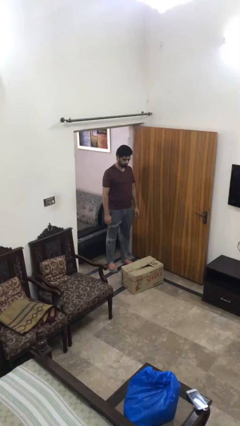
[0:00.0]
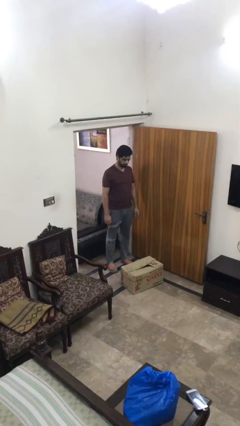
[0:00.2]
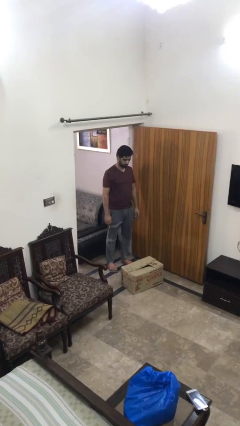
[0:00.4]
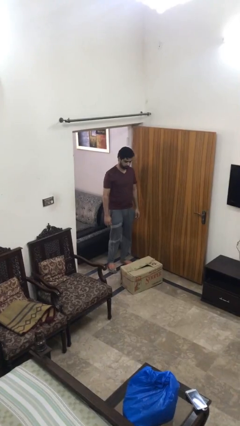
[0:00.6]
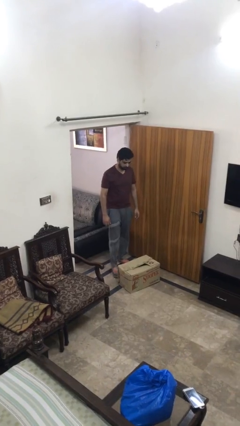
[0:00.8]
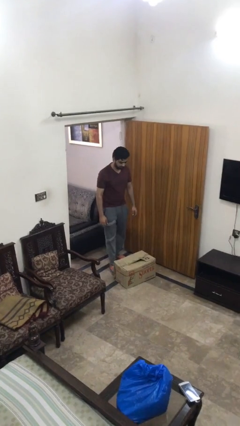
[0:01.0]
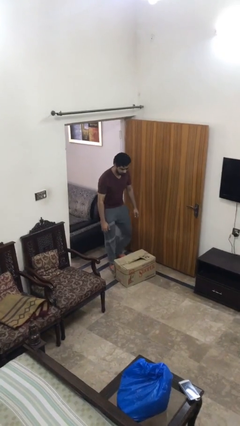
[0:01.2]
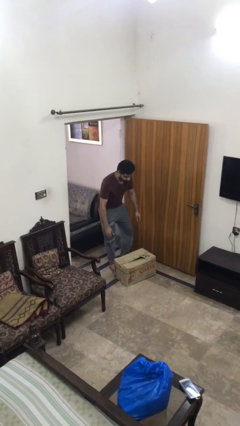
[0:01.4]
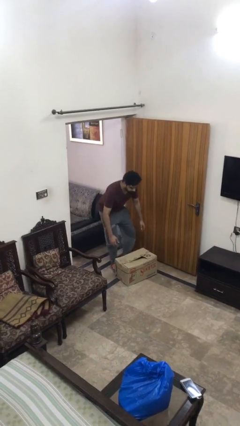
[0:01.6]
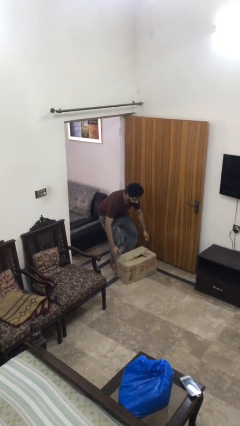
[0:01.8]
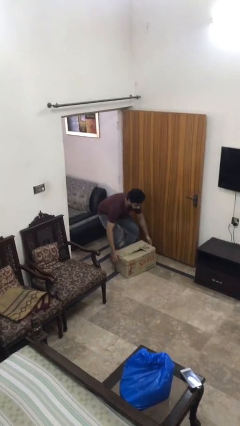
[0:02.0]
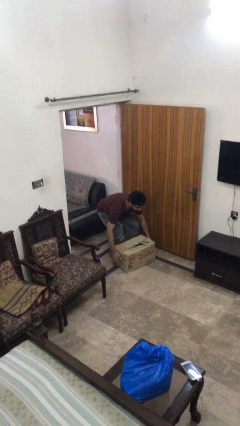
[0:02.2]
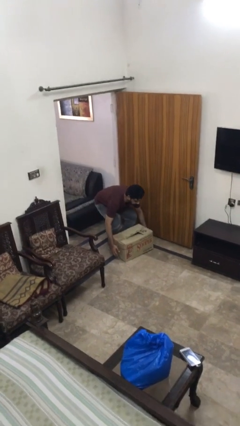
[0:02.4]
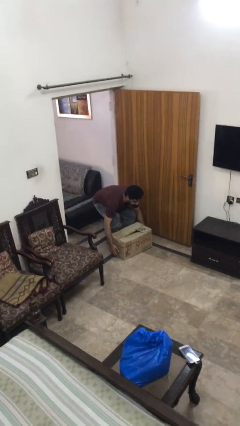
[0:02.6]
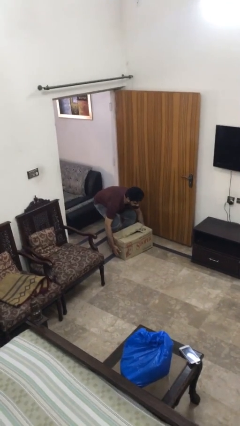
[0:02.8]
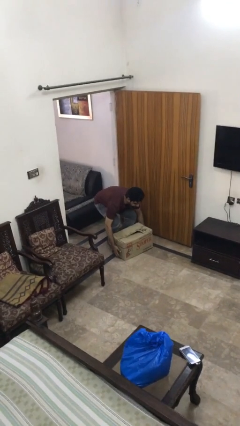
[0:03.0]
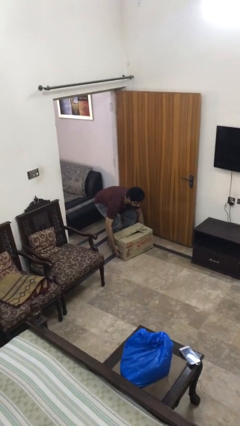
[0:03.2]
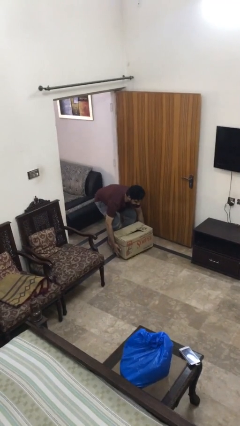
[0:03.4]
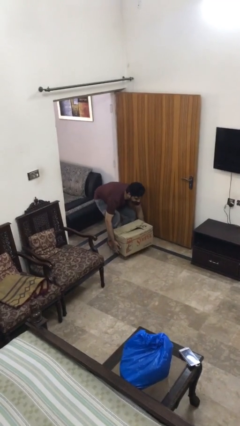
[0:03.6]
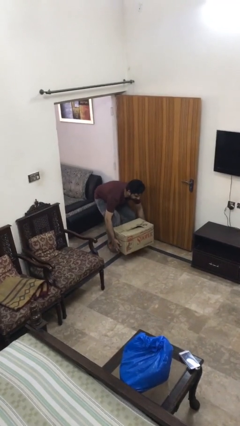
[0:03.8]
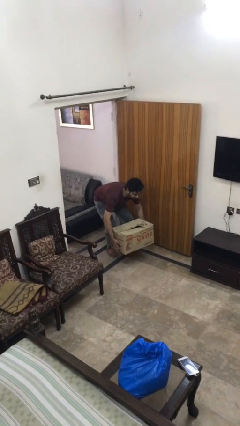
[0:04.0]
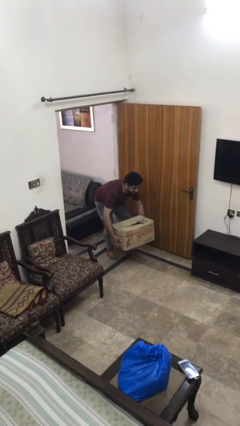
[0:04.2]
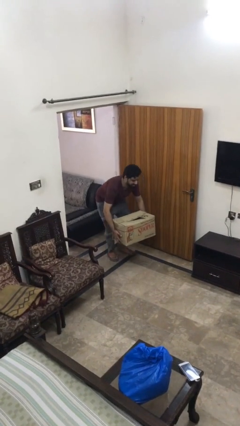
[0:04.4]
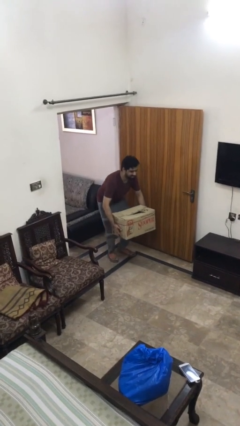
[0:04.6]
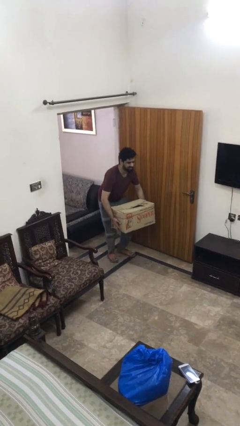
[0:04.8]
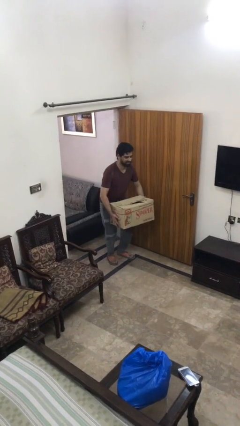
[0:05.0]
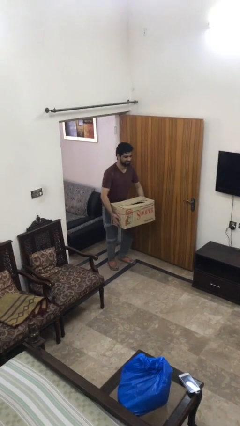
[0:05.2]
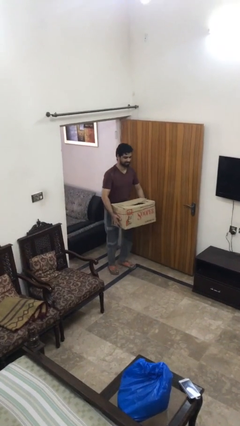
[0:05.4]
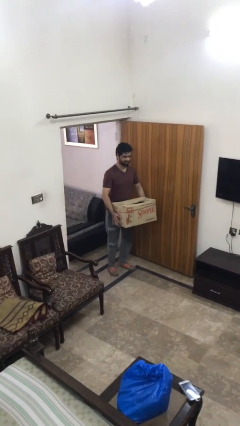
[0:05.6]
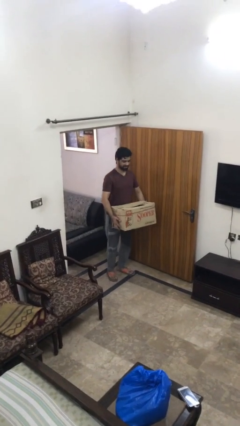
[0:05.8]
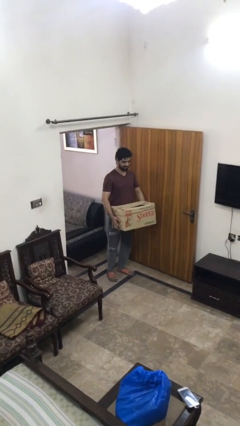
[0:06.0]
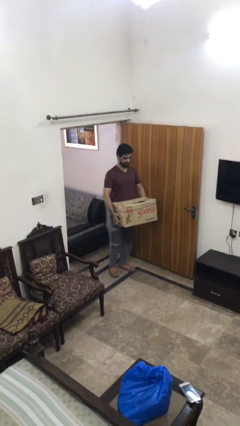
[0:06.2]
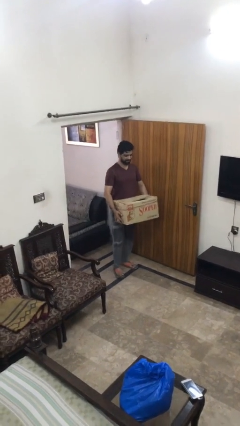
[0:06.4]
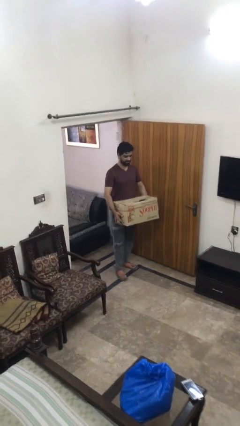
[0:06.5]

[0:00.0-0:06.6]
person picks up object from floor

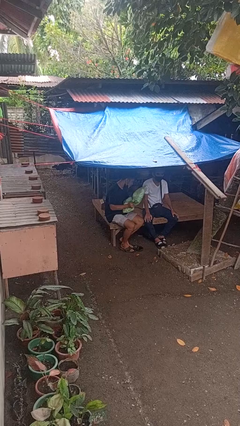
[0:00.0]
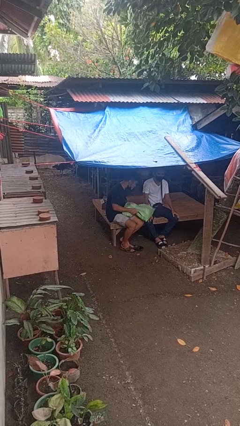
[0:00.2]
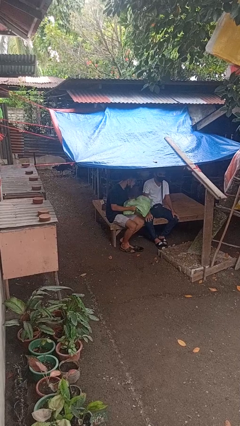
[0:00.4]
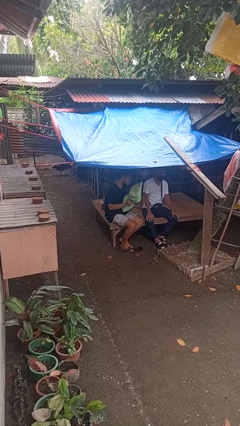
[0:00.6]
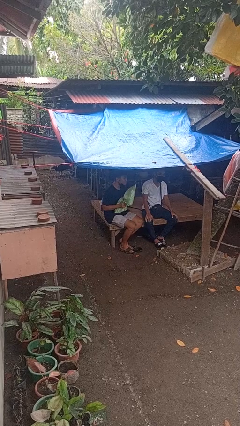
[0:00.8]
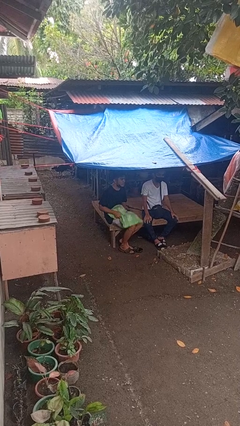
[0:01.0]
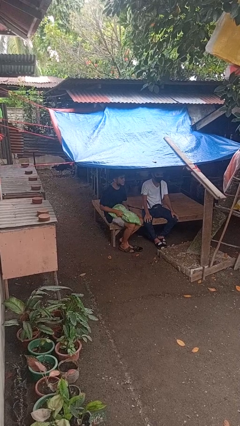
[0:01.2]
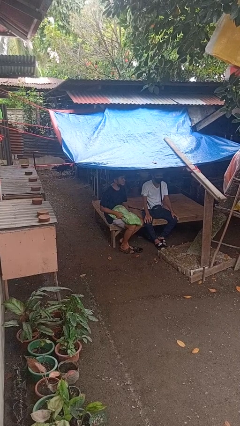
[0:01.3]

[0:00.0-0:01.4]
person hits person with pillow

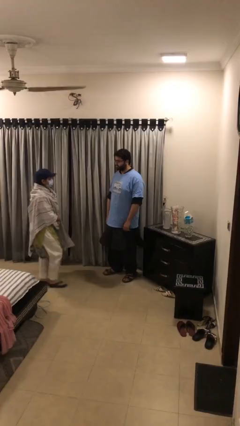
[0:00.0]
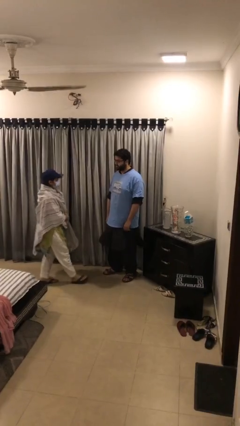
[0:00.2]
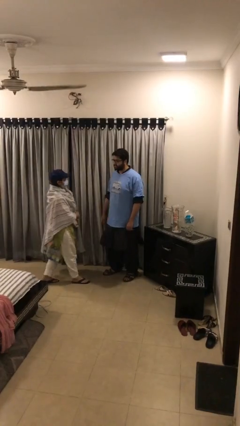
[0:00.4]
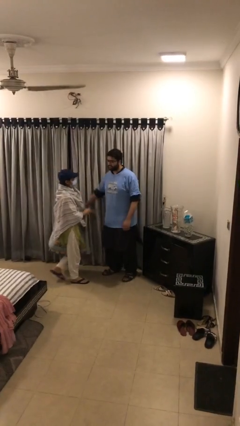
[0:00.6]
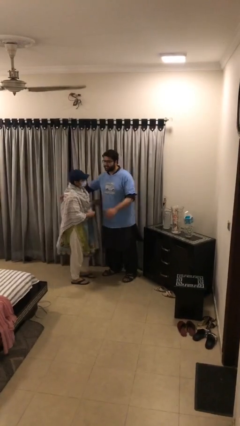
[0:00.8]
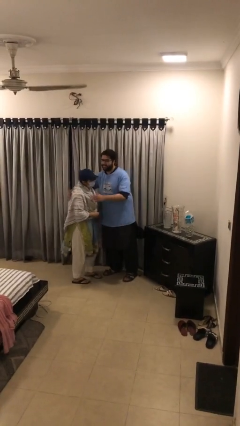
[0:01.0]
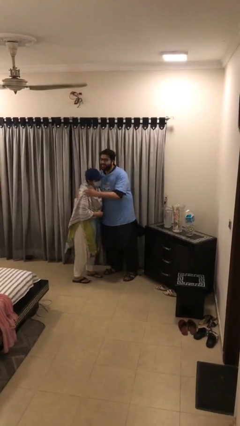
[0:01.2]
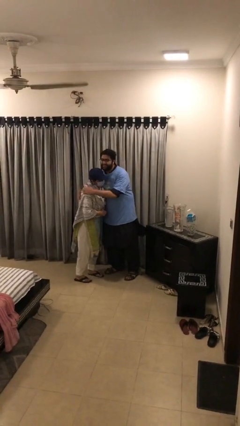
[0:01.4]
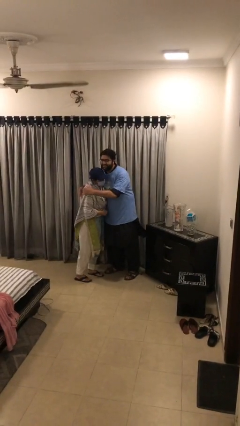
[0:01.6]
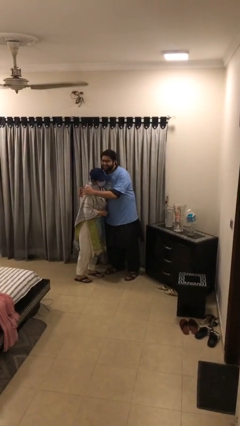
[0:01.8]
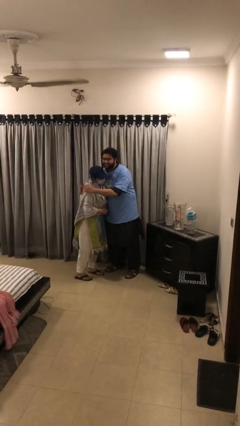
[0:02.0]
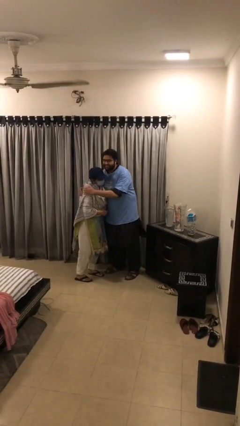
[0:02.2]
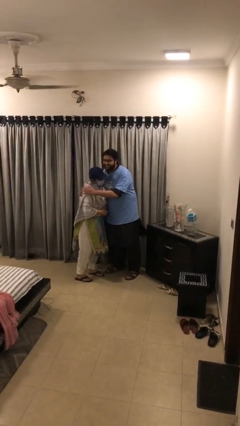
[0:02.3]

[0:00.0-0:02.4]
person embraces person

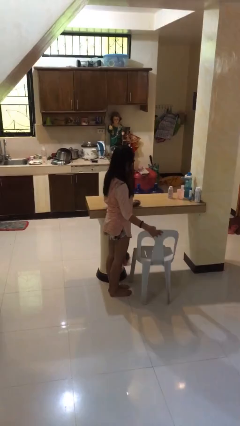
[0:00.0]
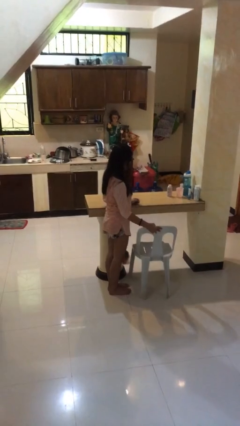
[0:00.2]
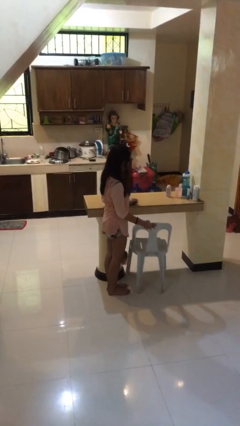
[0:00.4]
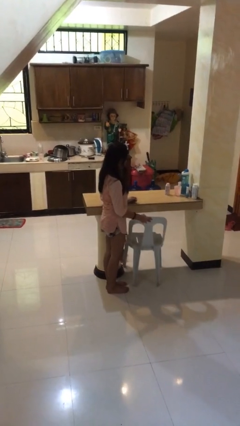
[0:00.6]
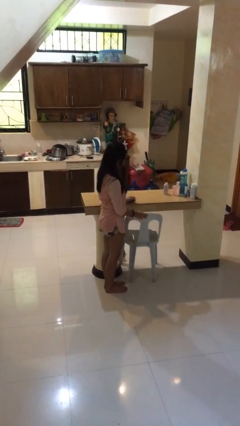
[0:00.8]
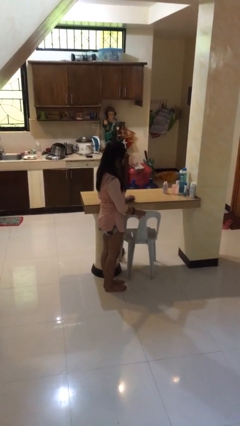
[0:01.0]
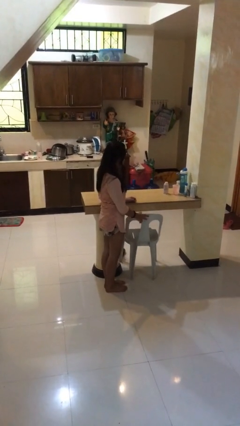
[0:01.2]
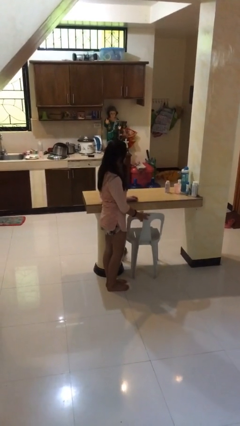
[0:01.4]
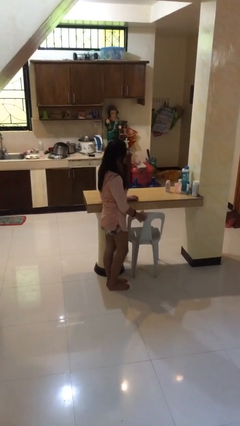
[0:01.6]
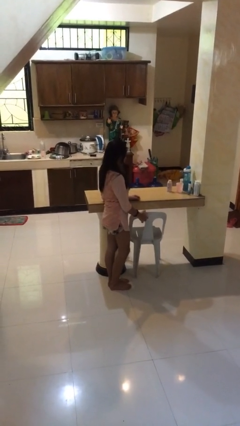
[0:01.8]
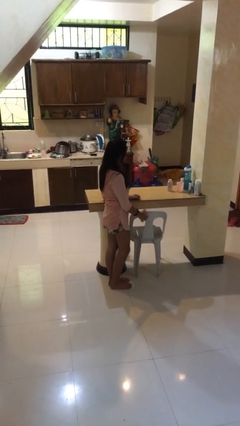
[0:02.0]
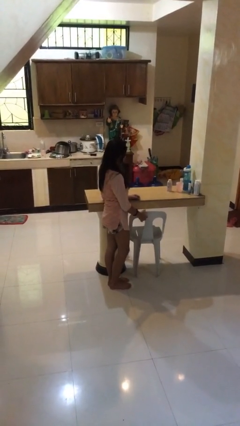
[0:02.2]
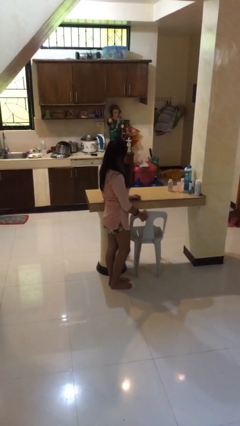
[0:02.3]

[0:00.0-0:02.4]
person pushes in chair

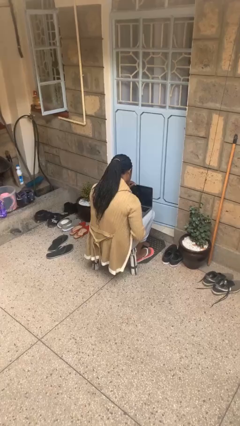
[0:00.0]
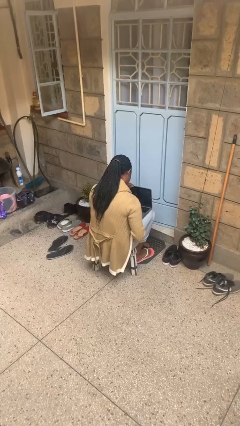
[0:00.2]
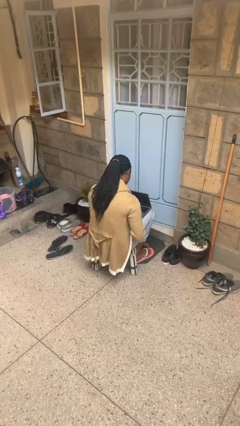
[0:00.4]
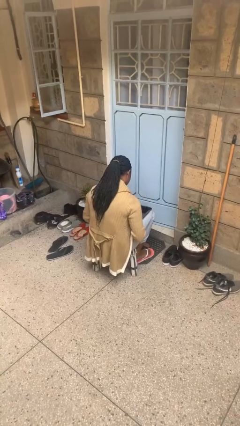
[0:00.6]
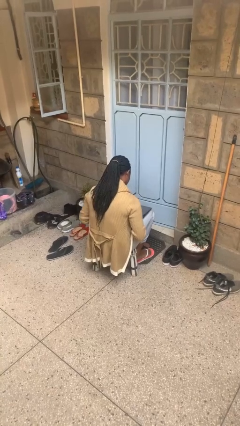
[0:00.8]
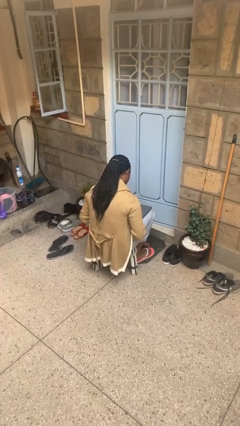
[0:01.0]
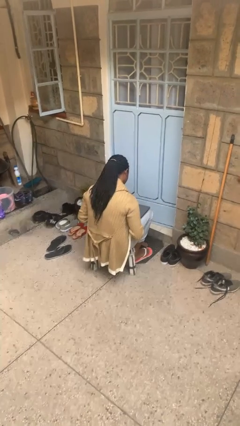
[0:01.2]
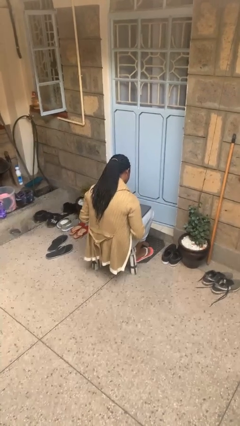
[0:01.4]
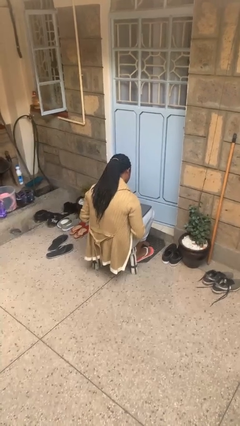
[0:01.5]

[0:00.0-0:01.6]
person closes laptop

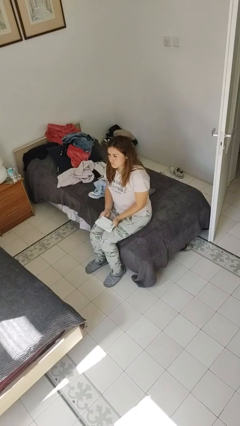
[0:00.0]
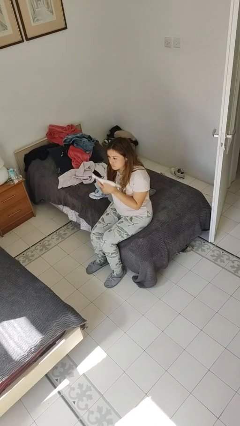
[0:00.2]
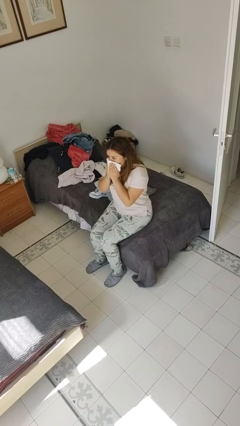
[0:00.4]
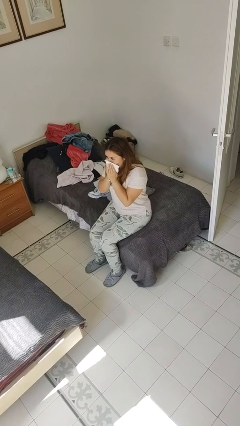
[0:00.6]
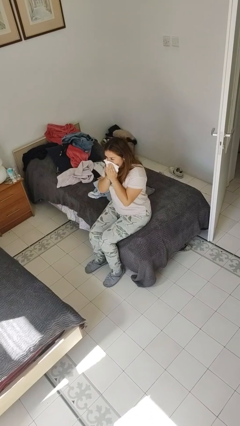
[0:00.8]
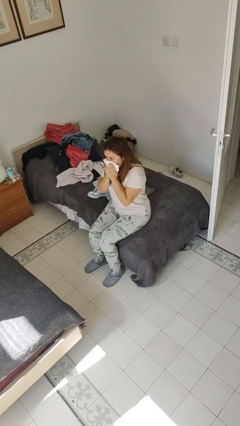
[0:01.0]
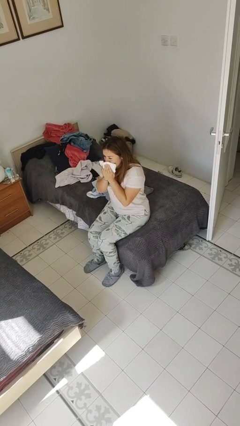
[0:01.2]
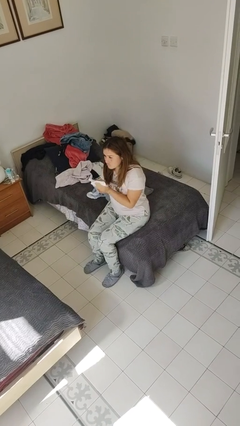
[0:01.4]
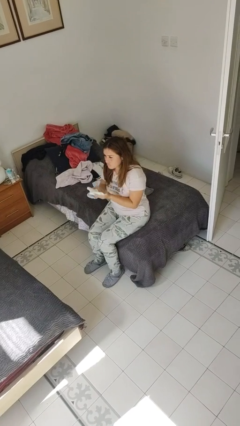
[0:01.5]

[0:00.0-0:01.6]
person blows nose

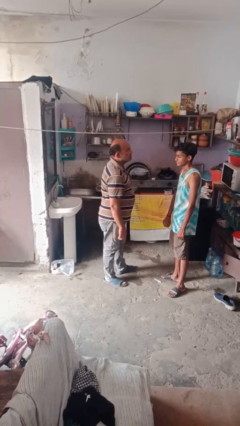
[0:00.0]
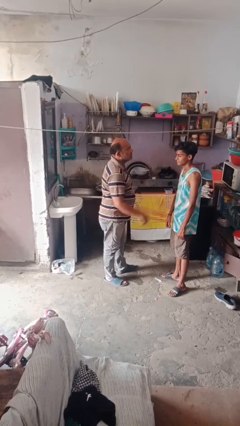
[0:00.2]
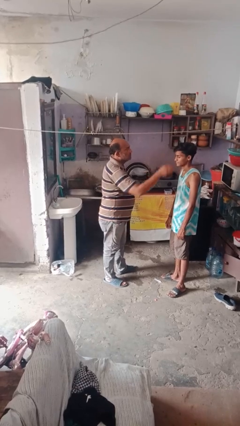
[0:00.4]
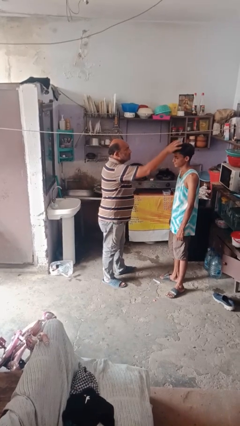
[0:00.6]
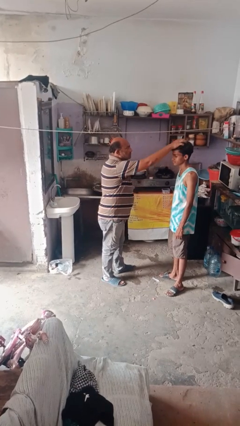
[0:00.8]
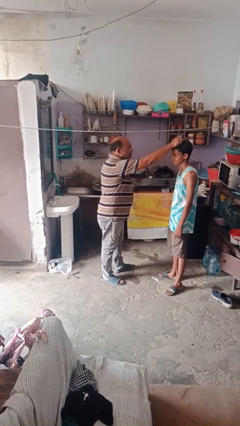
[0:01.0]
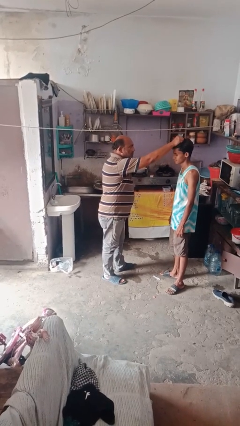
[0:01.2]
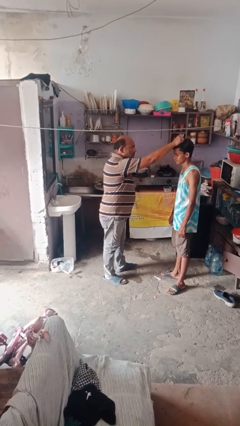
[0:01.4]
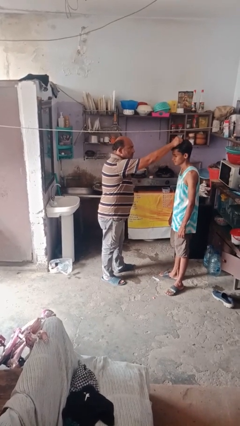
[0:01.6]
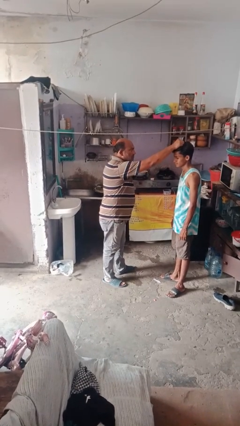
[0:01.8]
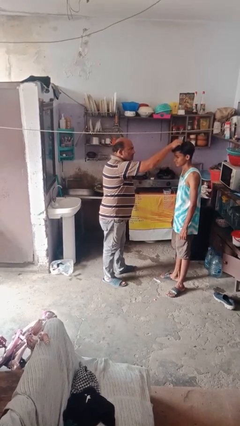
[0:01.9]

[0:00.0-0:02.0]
person grabs person by hair
